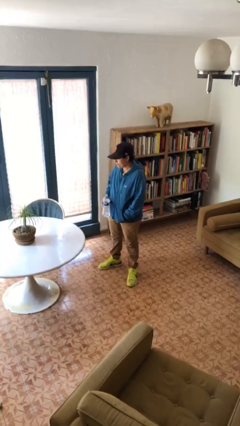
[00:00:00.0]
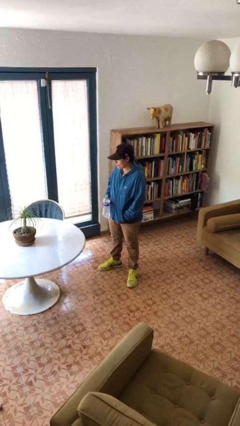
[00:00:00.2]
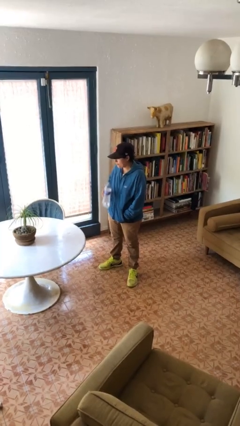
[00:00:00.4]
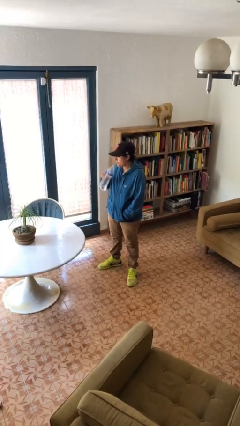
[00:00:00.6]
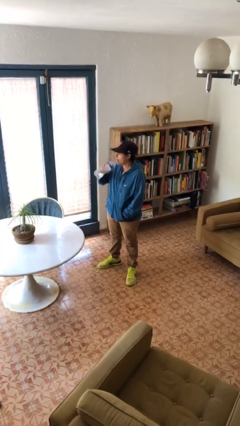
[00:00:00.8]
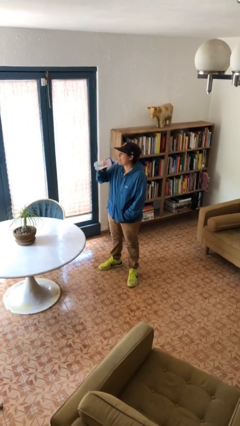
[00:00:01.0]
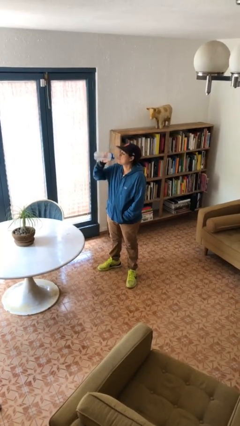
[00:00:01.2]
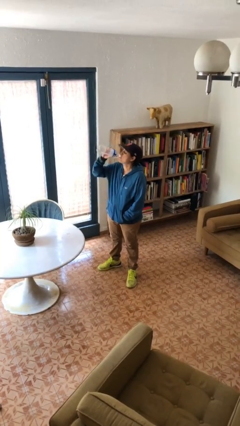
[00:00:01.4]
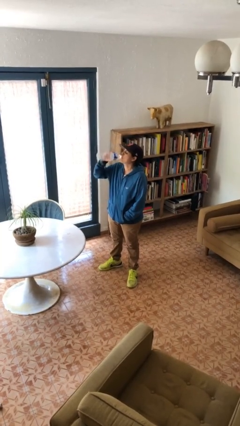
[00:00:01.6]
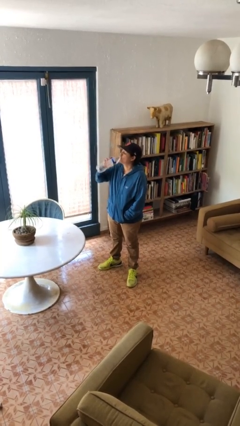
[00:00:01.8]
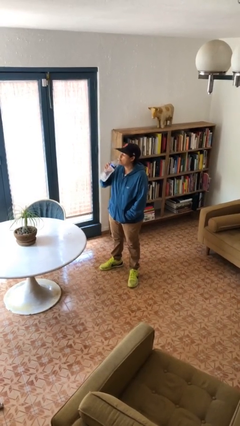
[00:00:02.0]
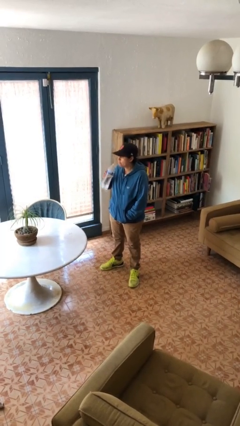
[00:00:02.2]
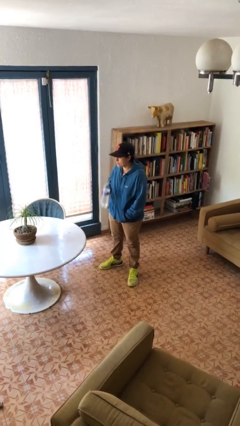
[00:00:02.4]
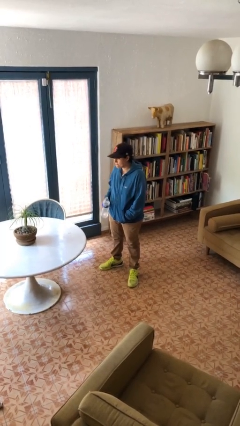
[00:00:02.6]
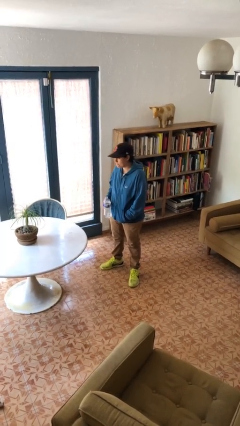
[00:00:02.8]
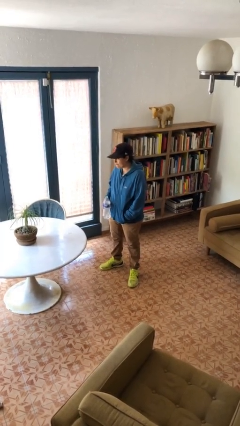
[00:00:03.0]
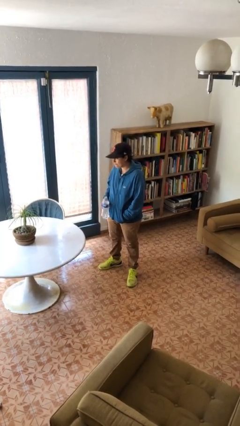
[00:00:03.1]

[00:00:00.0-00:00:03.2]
person drinks from bottle

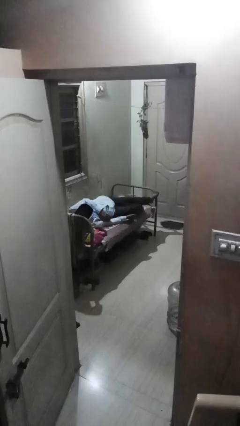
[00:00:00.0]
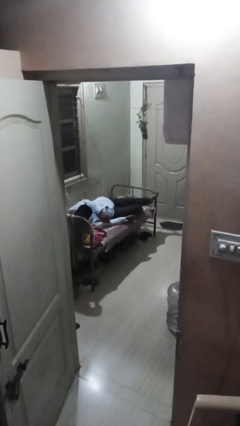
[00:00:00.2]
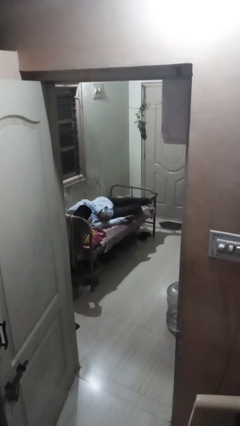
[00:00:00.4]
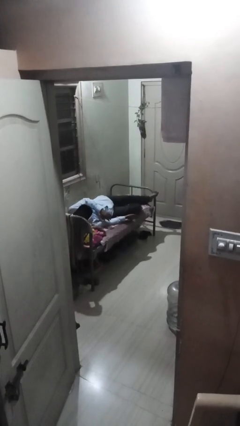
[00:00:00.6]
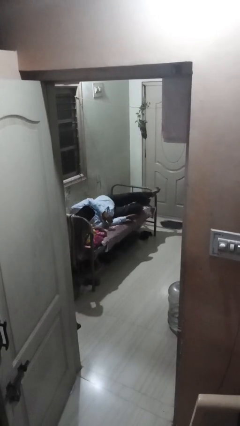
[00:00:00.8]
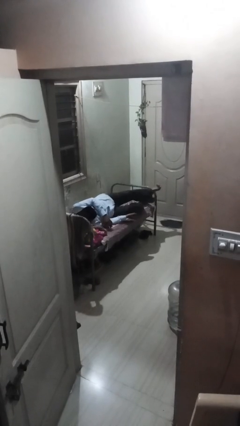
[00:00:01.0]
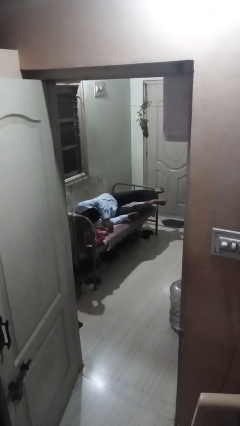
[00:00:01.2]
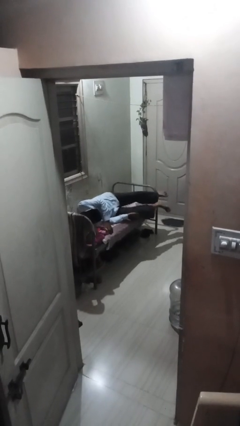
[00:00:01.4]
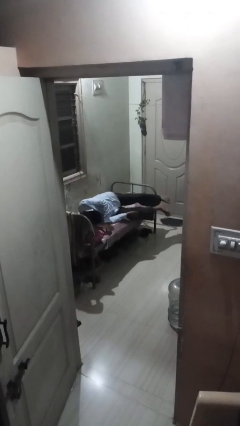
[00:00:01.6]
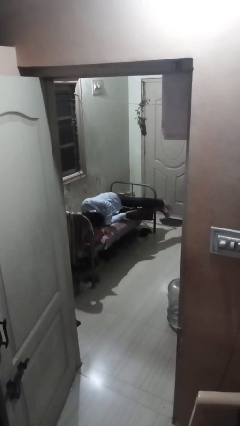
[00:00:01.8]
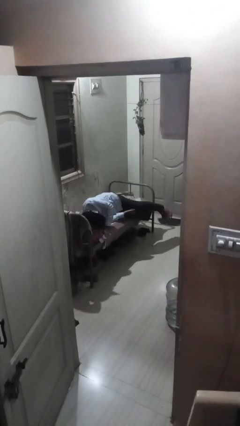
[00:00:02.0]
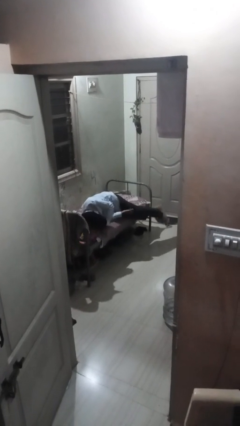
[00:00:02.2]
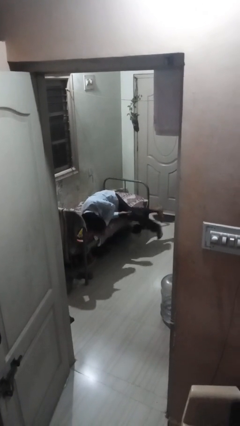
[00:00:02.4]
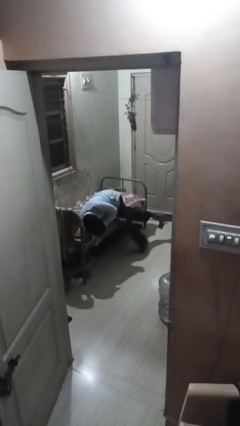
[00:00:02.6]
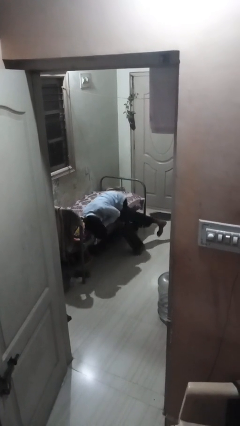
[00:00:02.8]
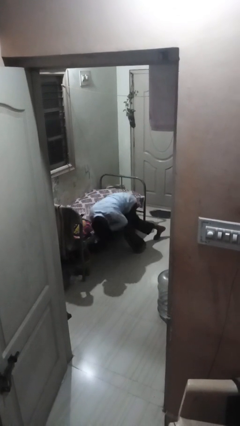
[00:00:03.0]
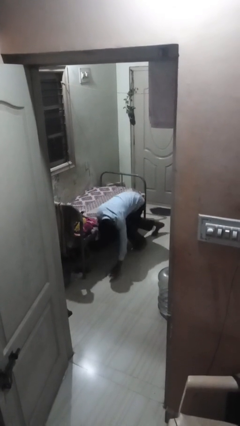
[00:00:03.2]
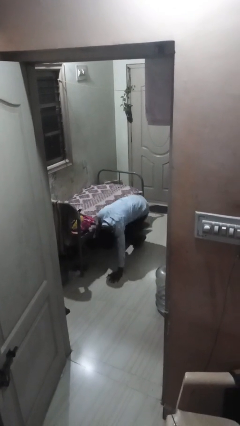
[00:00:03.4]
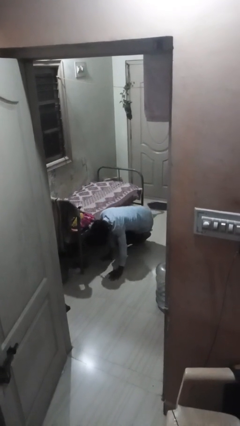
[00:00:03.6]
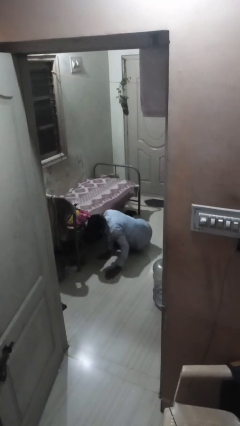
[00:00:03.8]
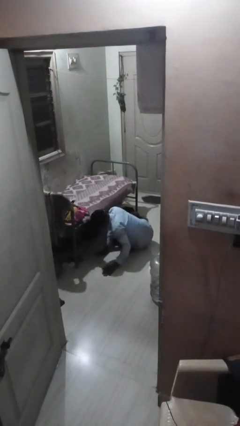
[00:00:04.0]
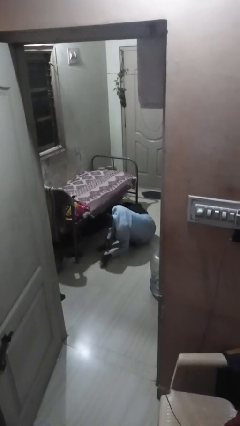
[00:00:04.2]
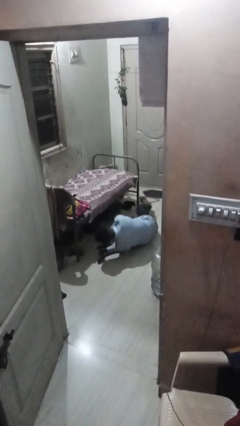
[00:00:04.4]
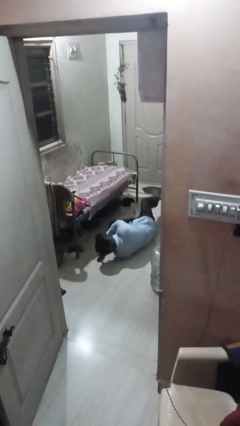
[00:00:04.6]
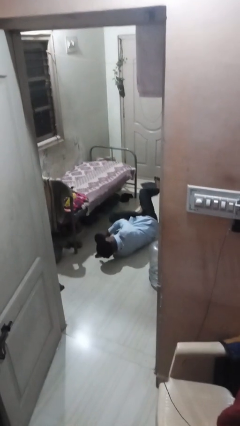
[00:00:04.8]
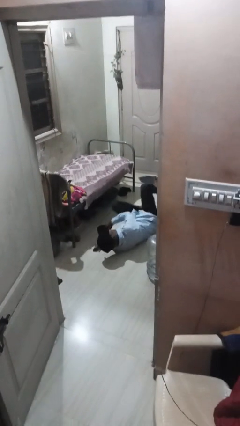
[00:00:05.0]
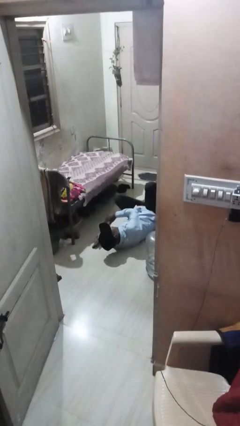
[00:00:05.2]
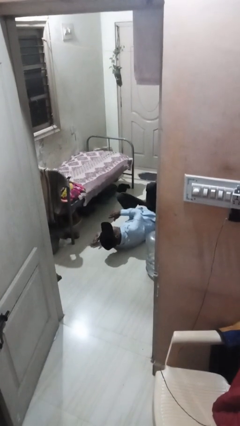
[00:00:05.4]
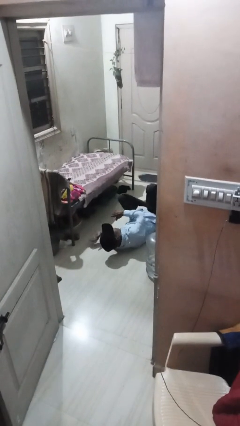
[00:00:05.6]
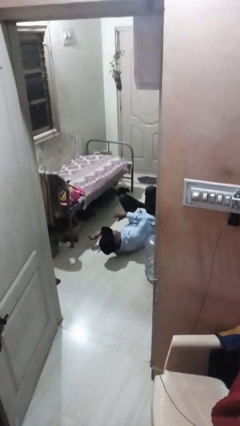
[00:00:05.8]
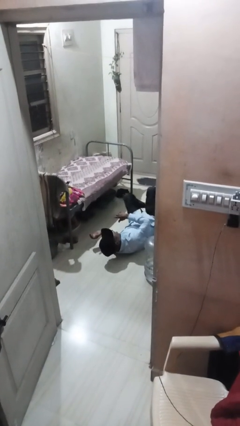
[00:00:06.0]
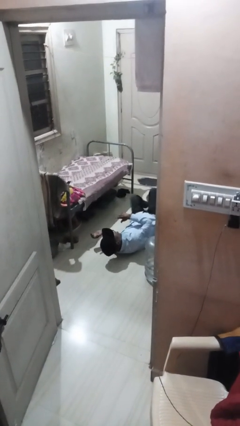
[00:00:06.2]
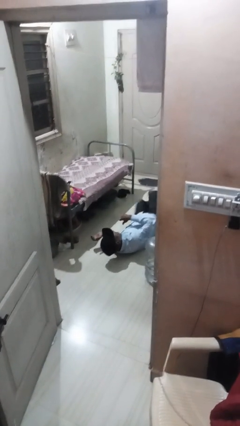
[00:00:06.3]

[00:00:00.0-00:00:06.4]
person falls from bed

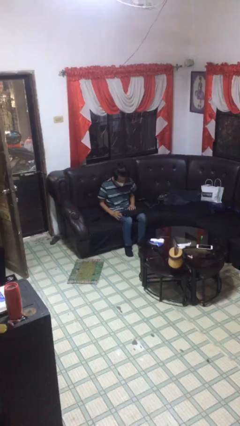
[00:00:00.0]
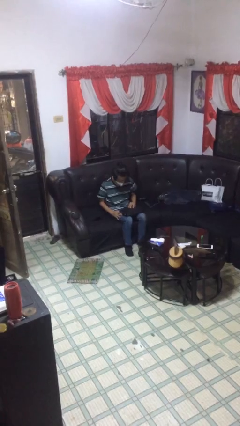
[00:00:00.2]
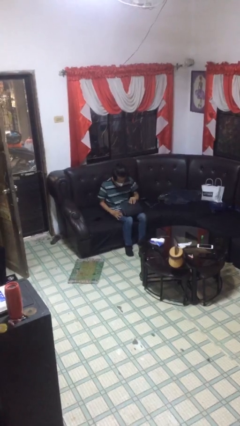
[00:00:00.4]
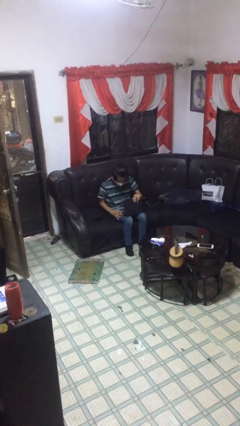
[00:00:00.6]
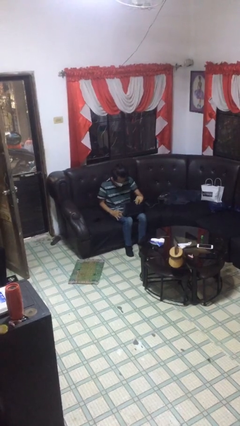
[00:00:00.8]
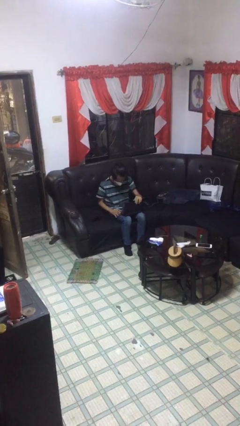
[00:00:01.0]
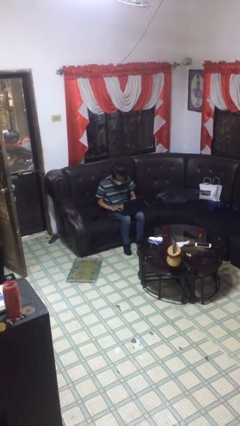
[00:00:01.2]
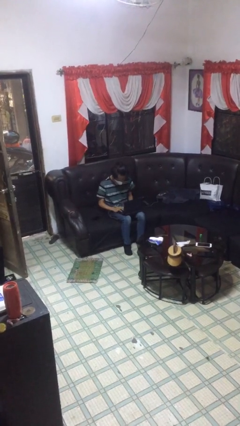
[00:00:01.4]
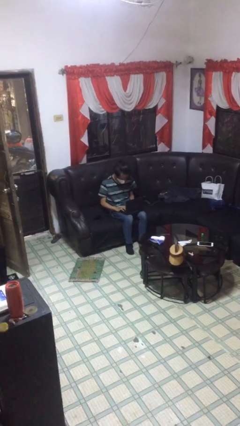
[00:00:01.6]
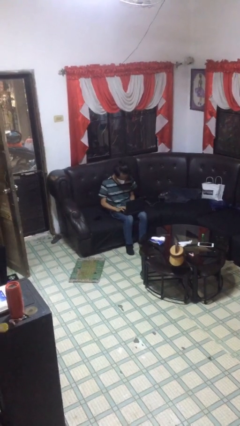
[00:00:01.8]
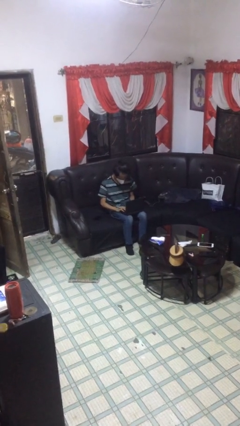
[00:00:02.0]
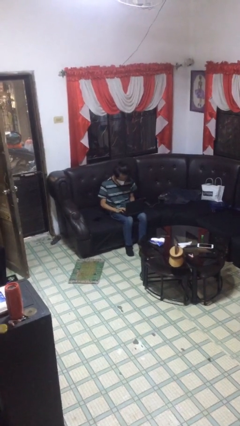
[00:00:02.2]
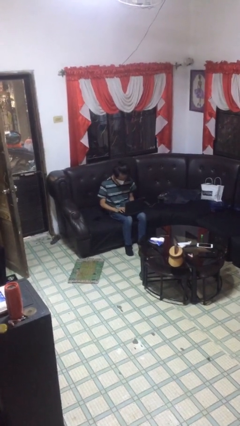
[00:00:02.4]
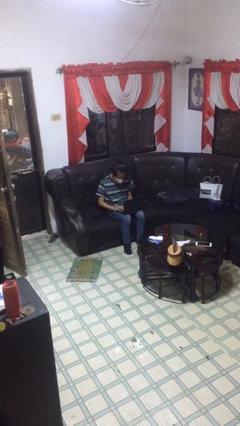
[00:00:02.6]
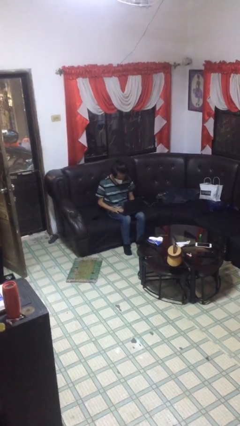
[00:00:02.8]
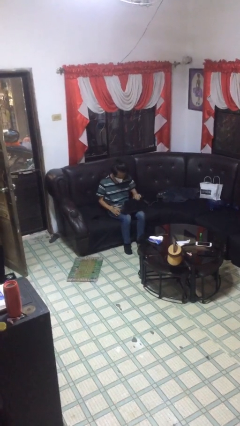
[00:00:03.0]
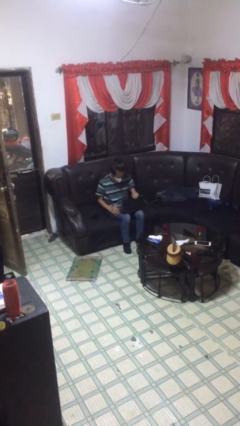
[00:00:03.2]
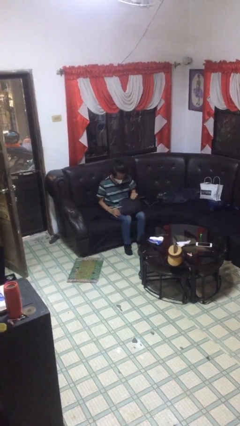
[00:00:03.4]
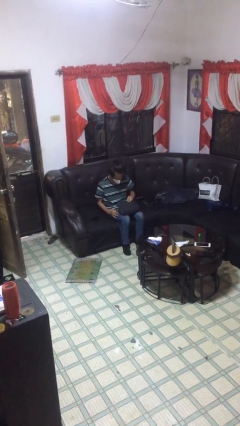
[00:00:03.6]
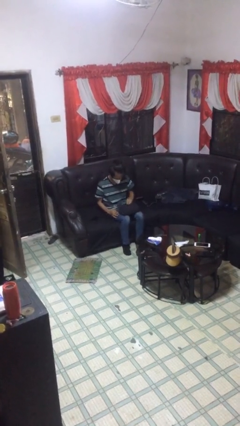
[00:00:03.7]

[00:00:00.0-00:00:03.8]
person interacts with laptop

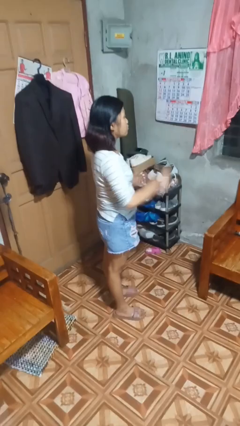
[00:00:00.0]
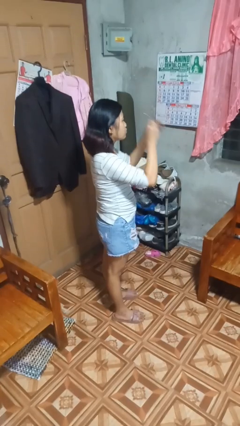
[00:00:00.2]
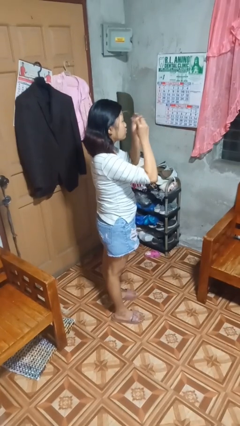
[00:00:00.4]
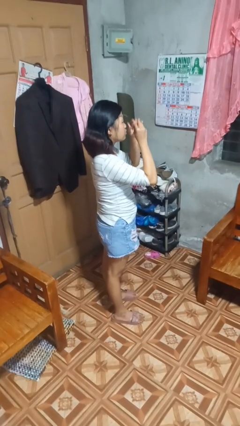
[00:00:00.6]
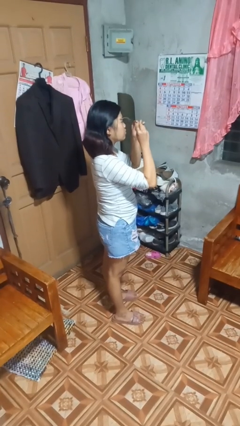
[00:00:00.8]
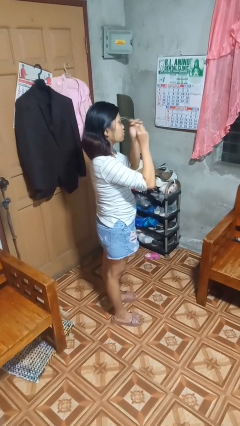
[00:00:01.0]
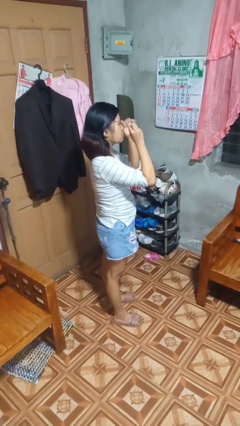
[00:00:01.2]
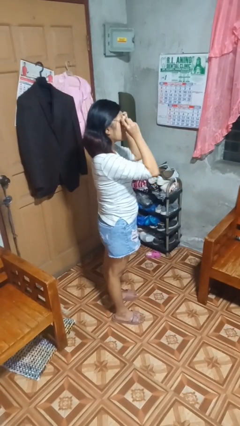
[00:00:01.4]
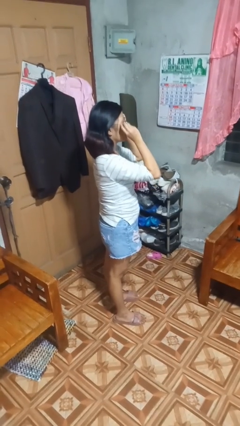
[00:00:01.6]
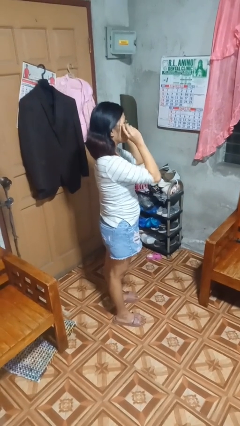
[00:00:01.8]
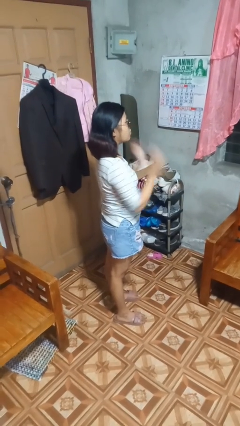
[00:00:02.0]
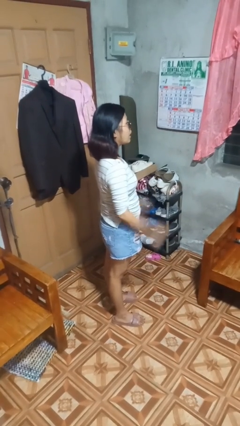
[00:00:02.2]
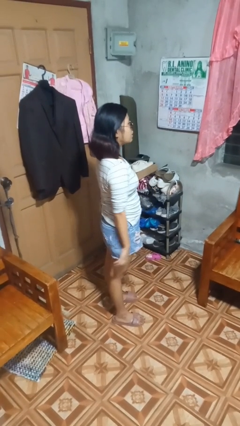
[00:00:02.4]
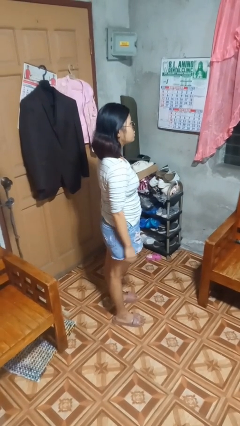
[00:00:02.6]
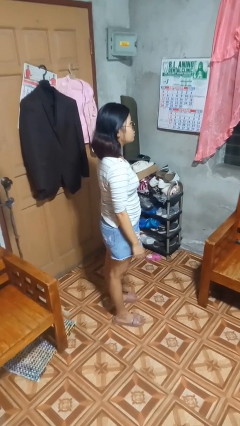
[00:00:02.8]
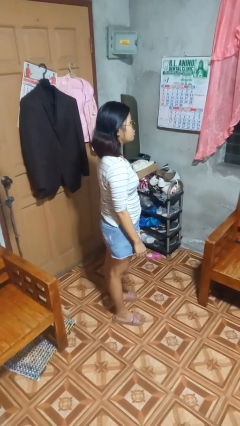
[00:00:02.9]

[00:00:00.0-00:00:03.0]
person puts on sunglasses

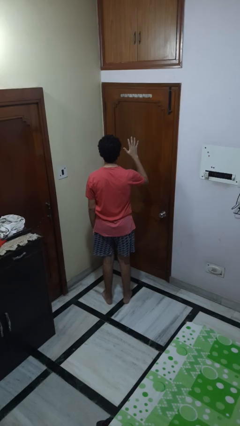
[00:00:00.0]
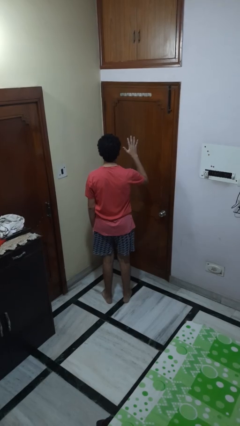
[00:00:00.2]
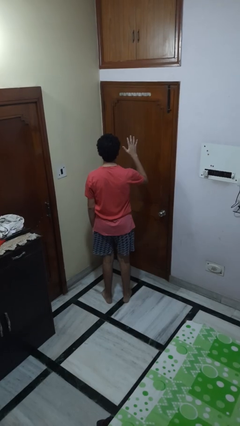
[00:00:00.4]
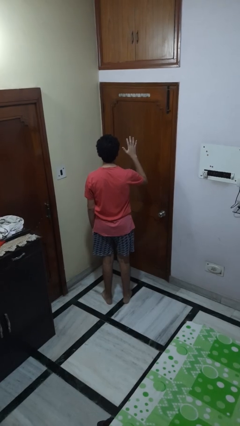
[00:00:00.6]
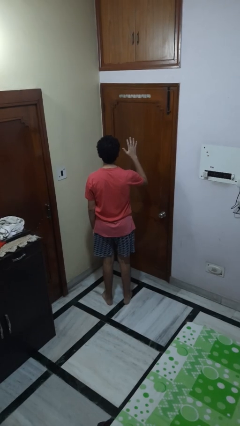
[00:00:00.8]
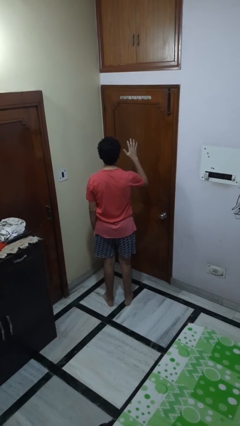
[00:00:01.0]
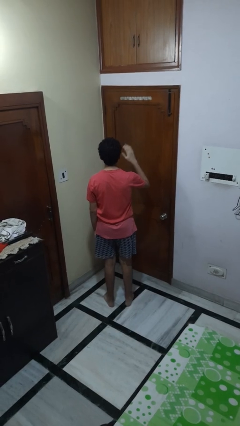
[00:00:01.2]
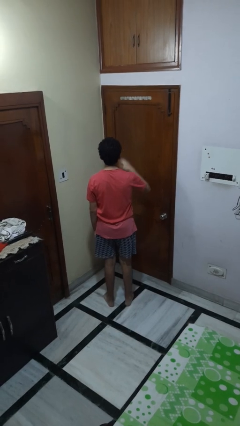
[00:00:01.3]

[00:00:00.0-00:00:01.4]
person gestures number five
